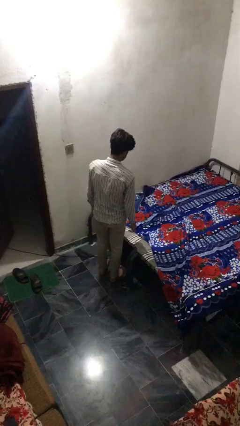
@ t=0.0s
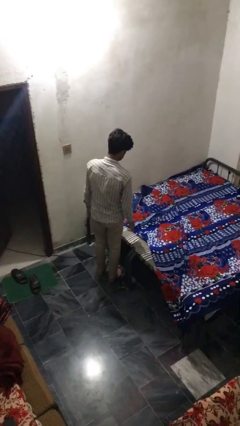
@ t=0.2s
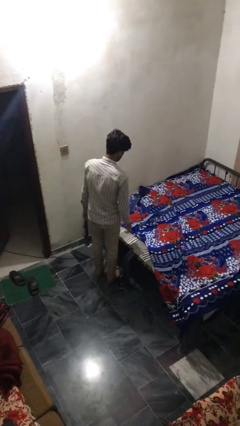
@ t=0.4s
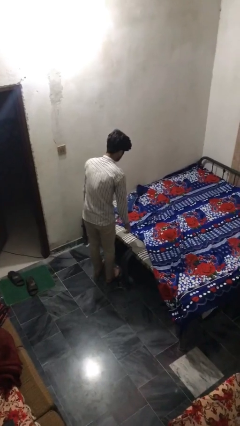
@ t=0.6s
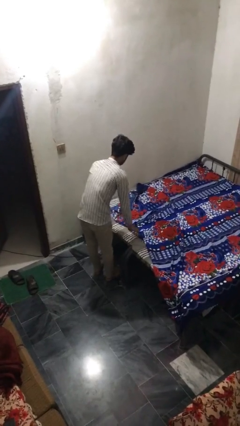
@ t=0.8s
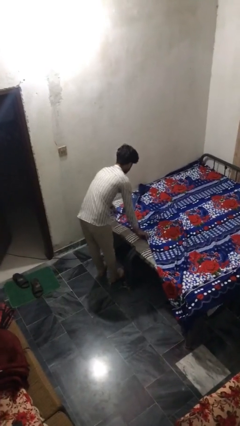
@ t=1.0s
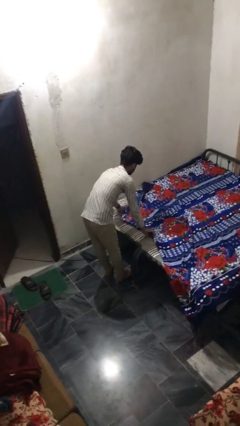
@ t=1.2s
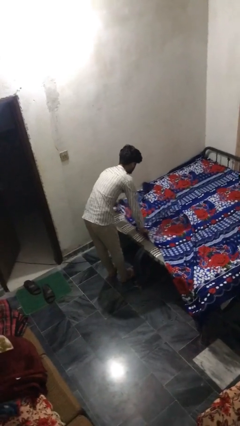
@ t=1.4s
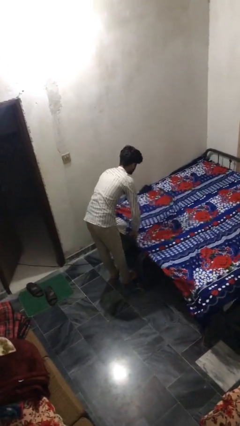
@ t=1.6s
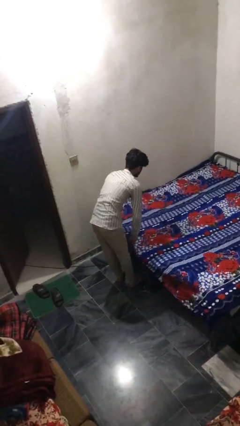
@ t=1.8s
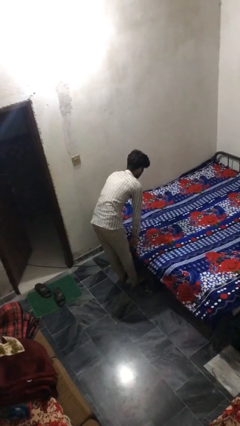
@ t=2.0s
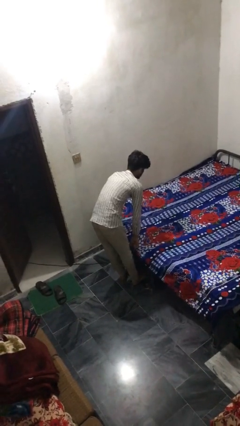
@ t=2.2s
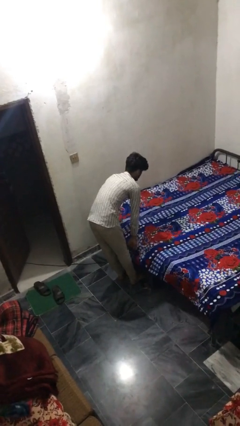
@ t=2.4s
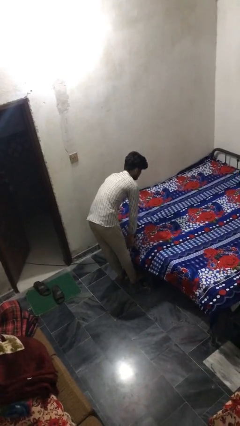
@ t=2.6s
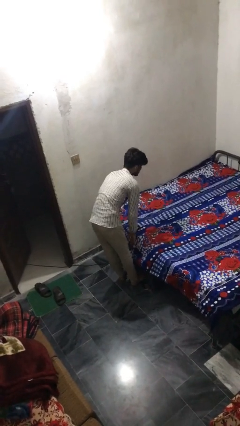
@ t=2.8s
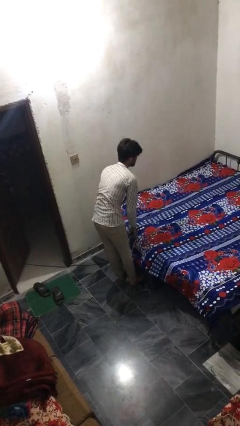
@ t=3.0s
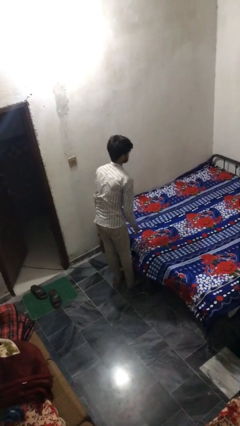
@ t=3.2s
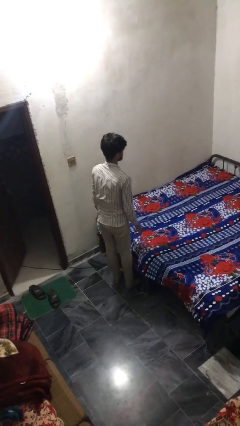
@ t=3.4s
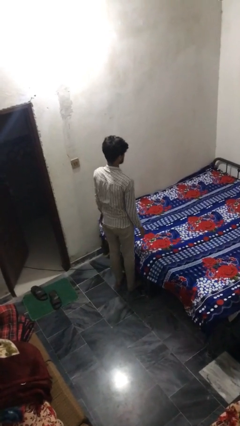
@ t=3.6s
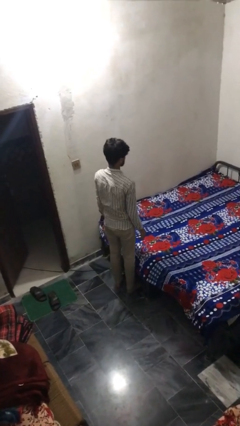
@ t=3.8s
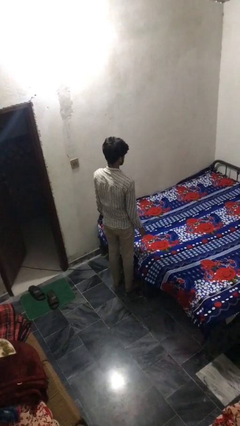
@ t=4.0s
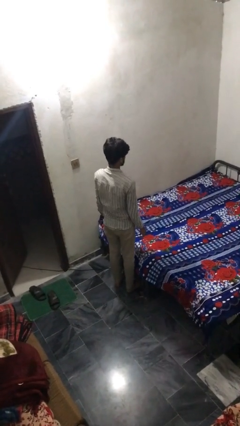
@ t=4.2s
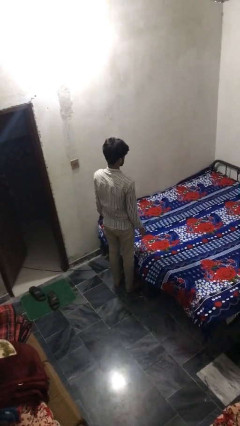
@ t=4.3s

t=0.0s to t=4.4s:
person makes bed

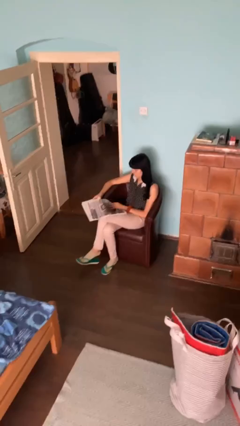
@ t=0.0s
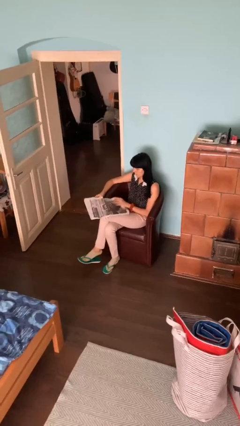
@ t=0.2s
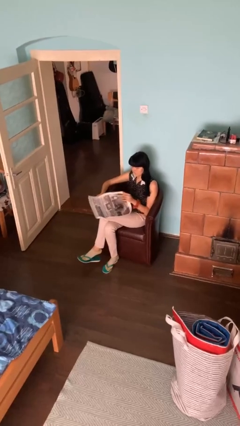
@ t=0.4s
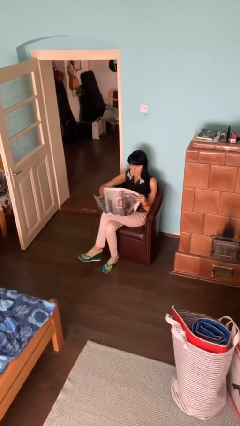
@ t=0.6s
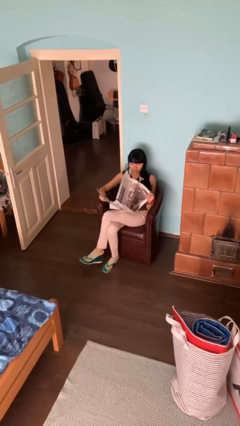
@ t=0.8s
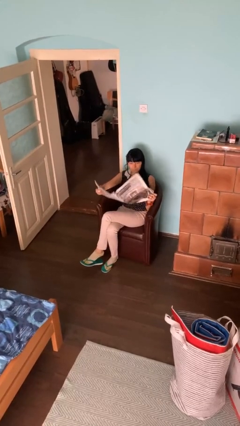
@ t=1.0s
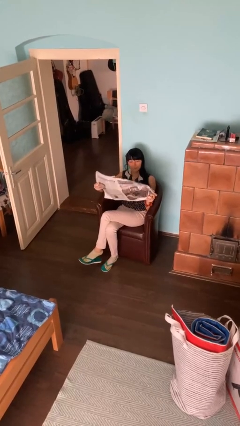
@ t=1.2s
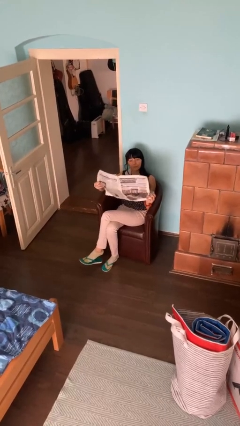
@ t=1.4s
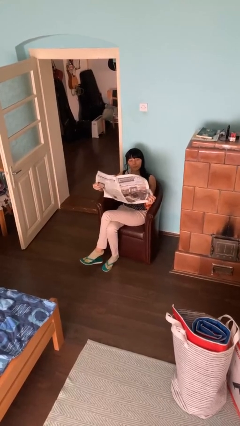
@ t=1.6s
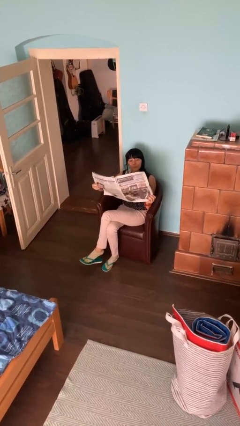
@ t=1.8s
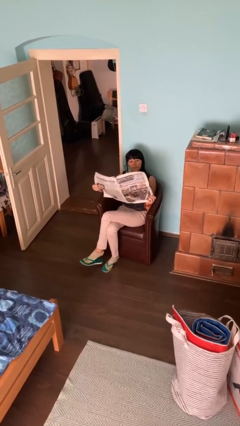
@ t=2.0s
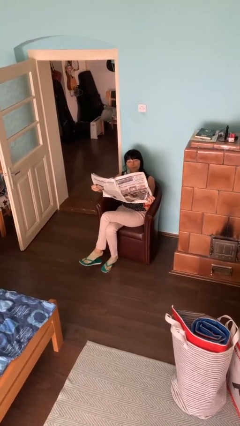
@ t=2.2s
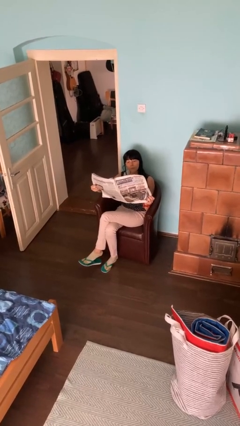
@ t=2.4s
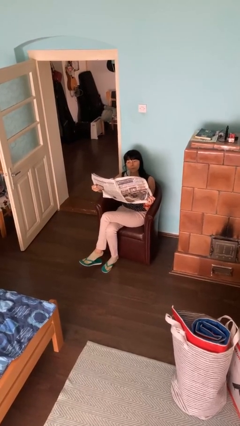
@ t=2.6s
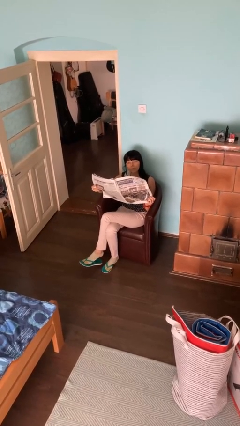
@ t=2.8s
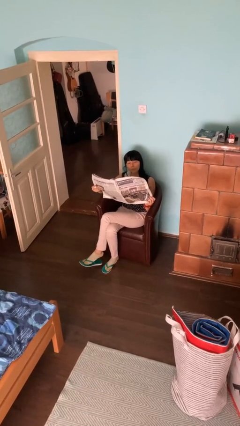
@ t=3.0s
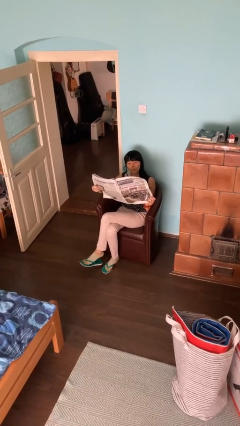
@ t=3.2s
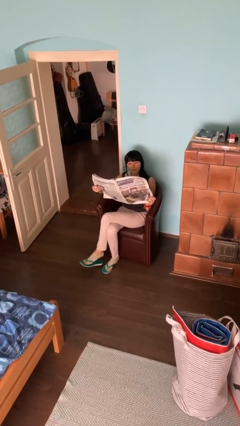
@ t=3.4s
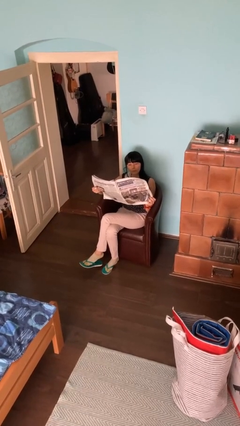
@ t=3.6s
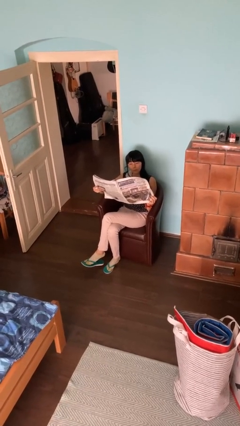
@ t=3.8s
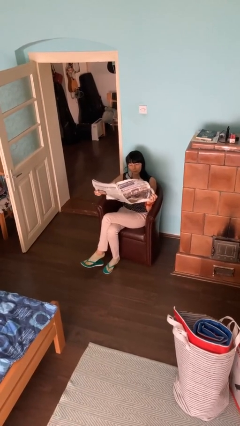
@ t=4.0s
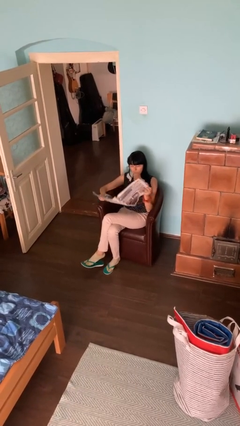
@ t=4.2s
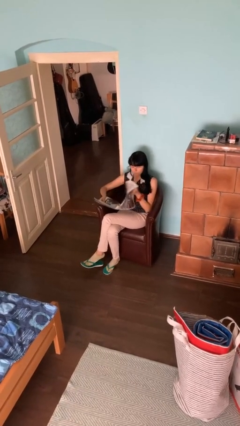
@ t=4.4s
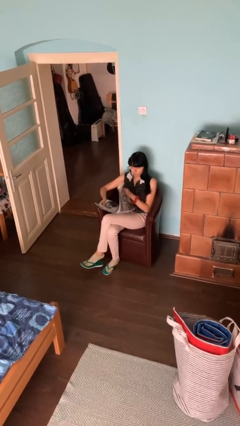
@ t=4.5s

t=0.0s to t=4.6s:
person reads newspaper

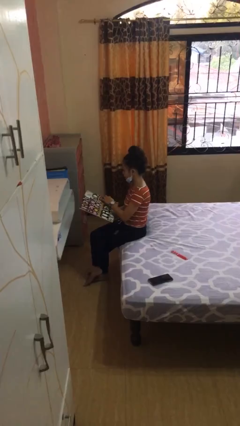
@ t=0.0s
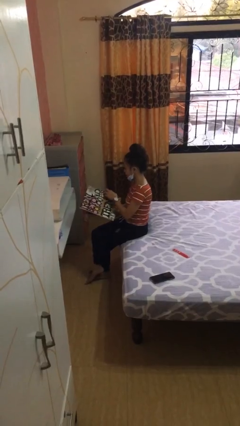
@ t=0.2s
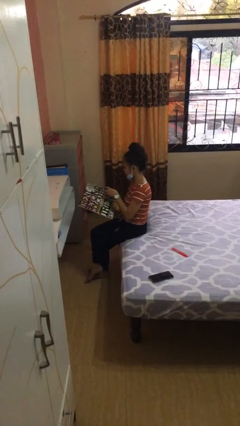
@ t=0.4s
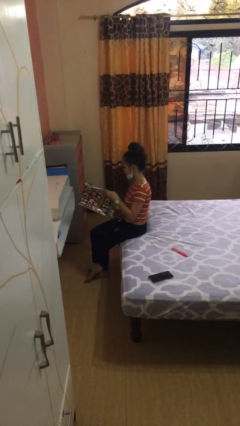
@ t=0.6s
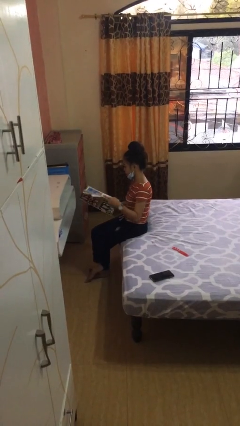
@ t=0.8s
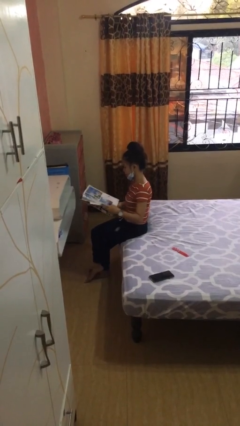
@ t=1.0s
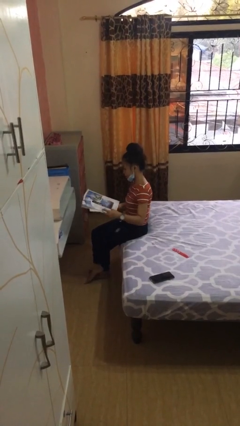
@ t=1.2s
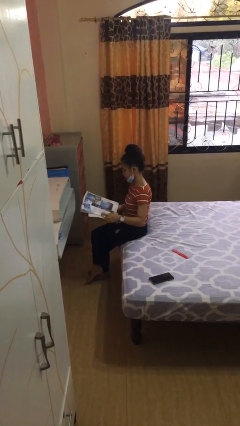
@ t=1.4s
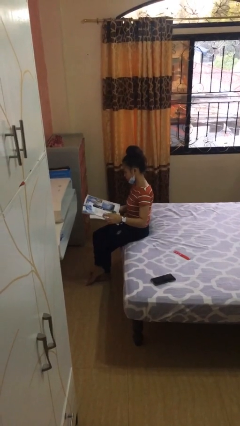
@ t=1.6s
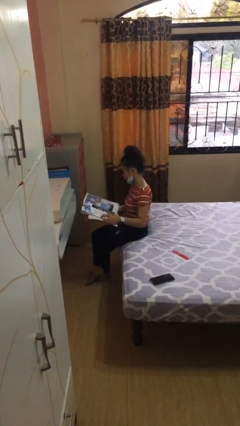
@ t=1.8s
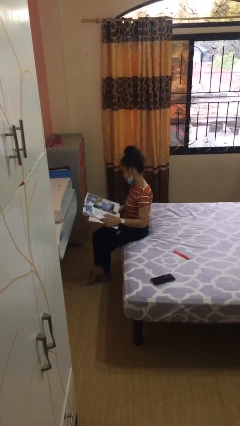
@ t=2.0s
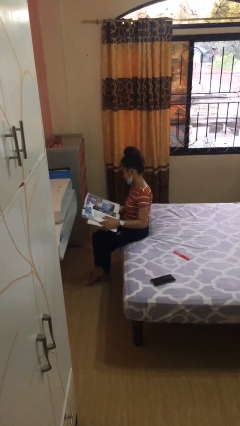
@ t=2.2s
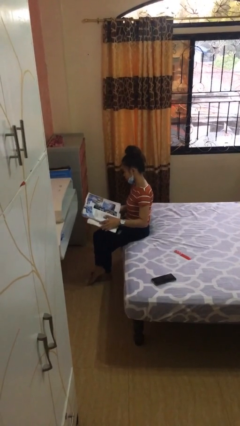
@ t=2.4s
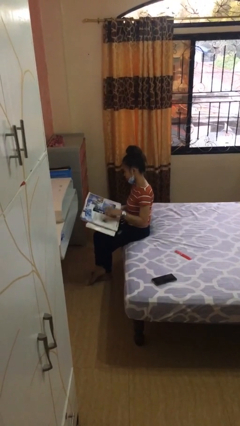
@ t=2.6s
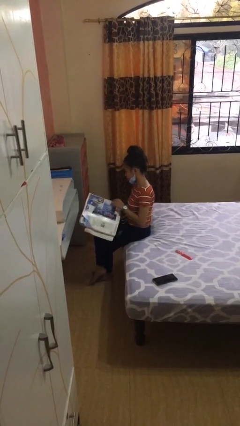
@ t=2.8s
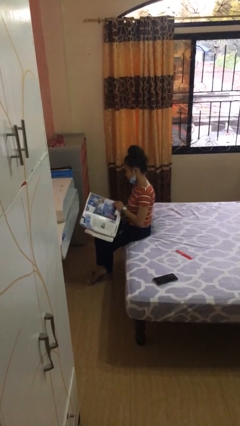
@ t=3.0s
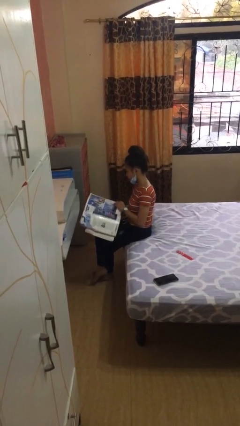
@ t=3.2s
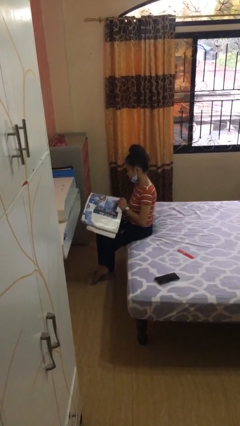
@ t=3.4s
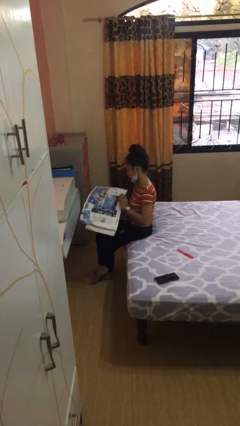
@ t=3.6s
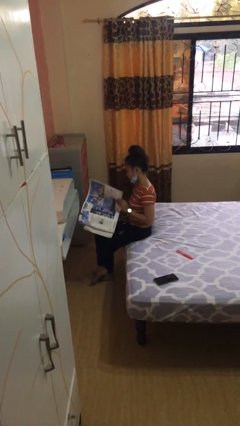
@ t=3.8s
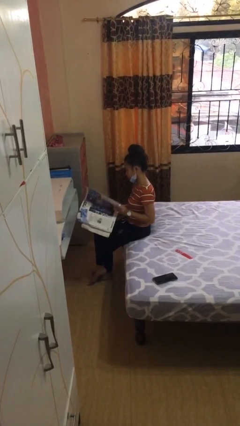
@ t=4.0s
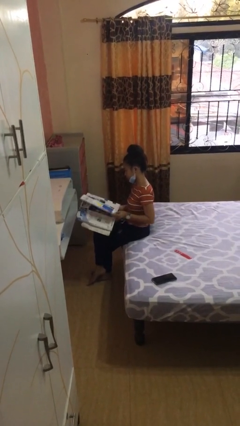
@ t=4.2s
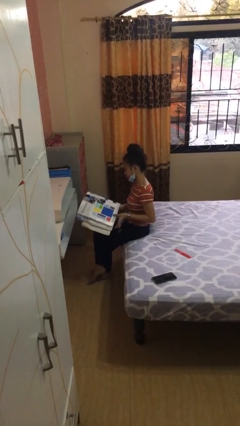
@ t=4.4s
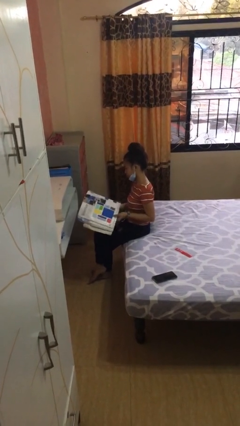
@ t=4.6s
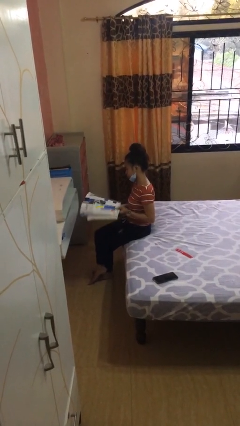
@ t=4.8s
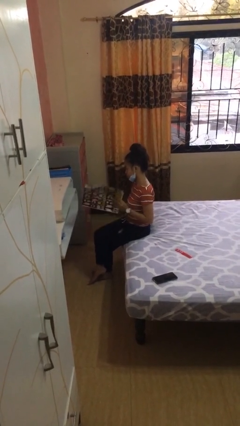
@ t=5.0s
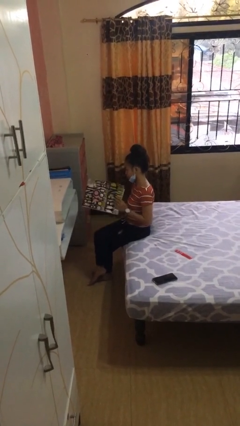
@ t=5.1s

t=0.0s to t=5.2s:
person reads document

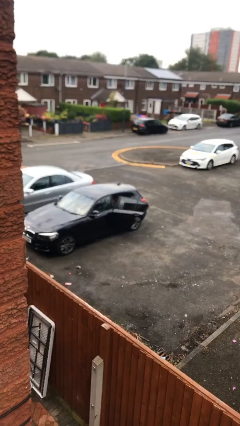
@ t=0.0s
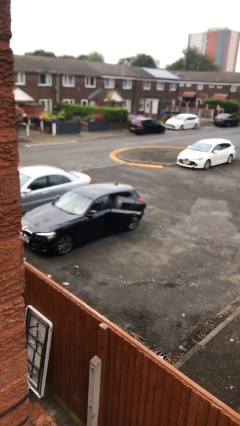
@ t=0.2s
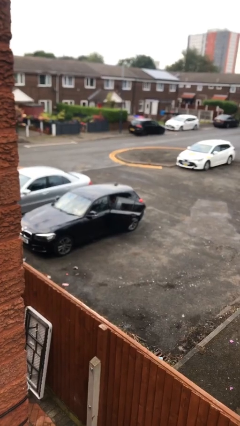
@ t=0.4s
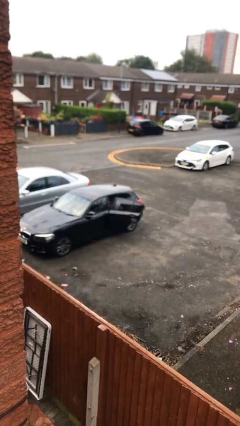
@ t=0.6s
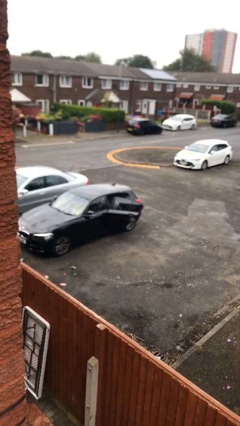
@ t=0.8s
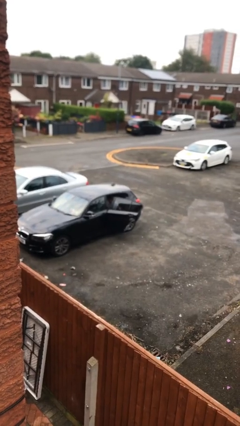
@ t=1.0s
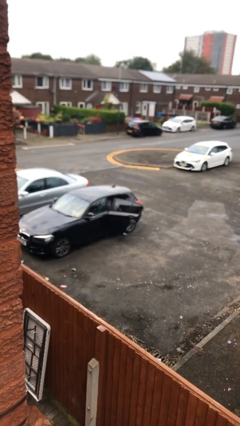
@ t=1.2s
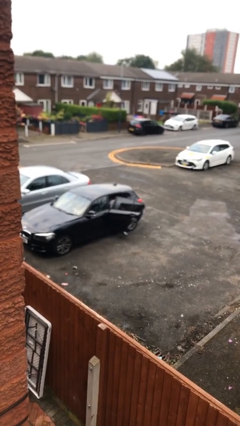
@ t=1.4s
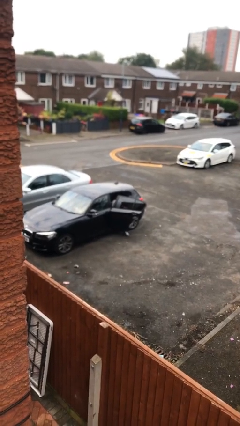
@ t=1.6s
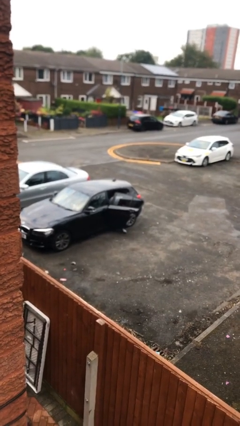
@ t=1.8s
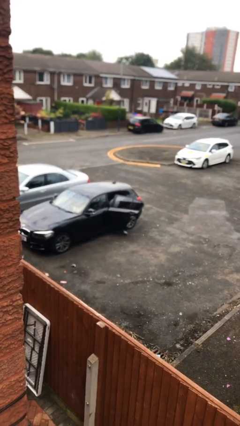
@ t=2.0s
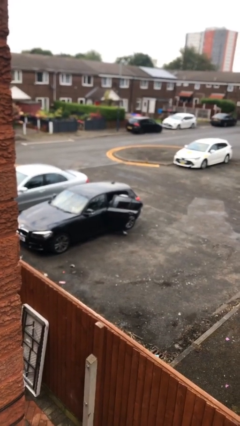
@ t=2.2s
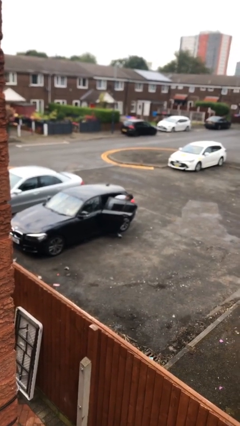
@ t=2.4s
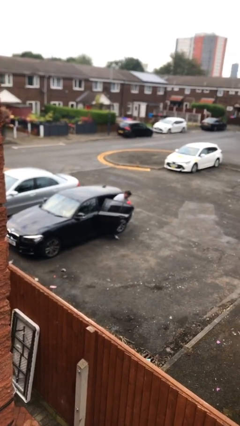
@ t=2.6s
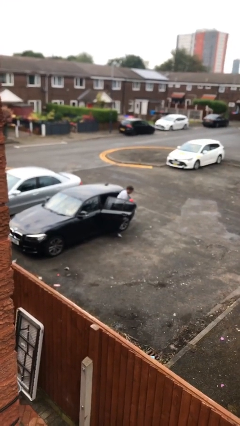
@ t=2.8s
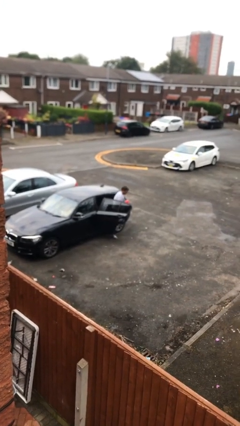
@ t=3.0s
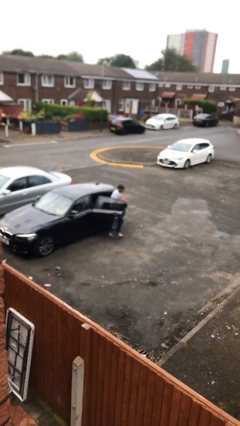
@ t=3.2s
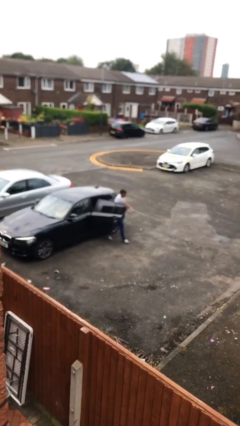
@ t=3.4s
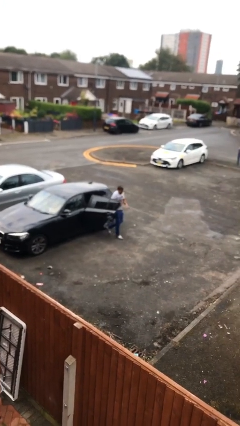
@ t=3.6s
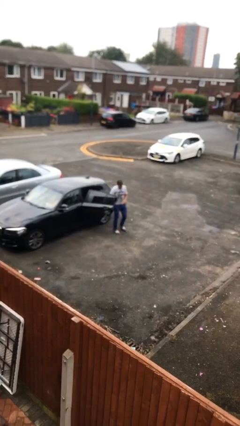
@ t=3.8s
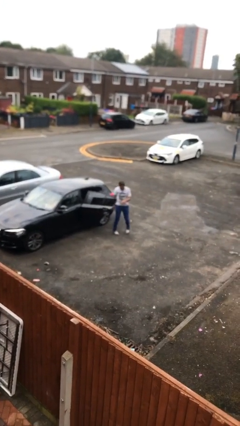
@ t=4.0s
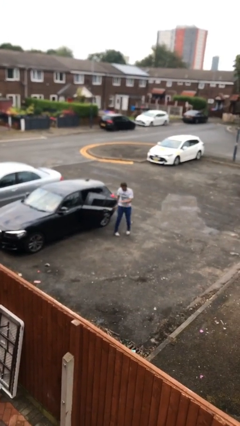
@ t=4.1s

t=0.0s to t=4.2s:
person exits car
